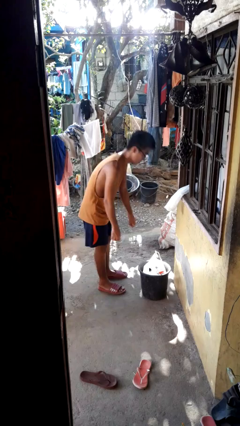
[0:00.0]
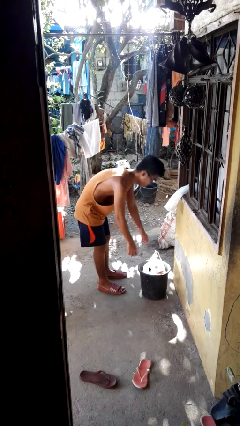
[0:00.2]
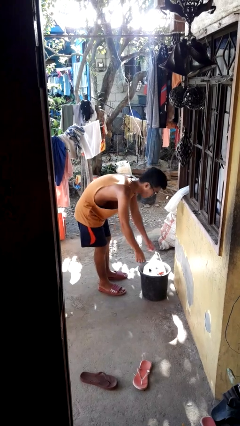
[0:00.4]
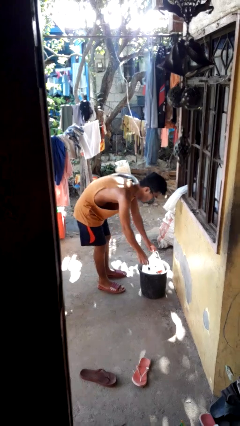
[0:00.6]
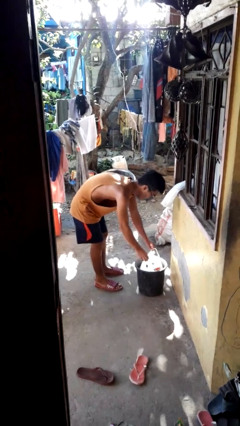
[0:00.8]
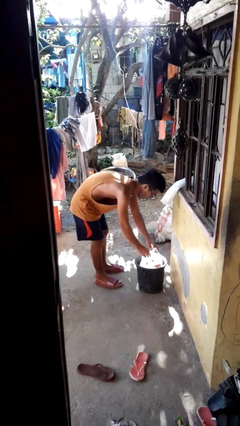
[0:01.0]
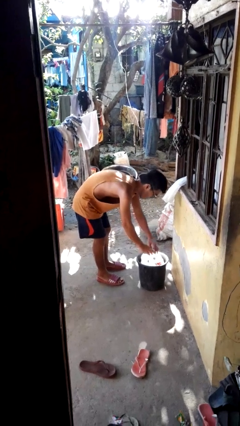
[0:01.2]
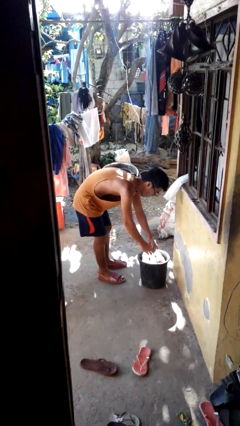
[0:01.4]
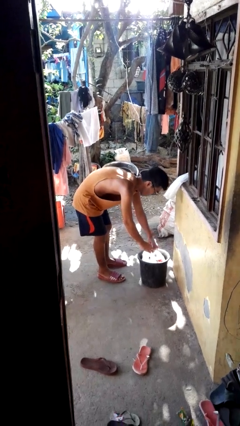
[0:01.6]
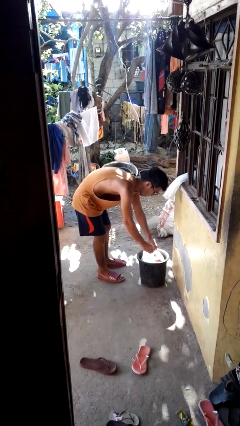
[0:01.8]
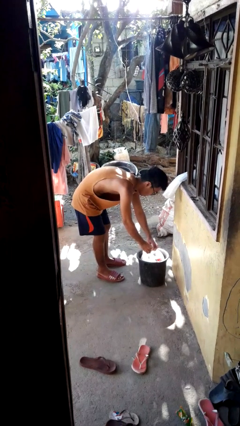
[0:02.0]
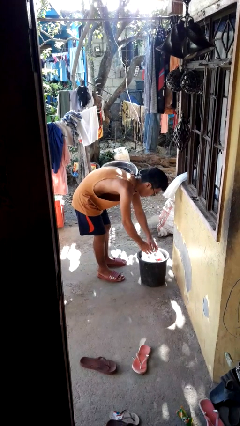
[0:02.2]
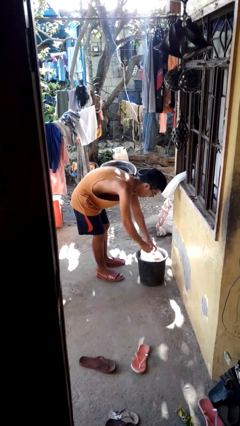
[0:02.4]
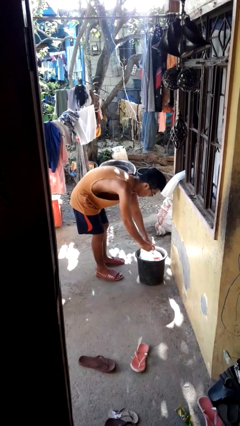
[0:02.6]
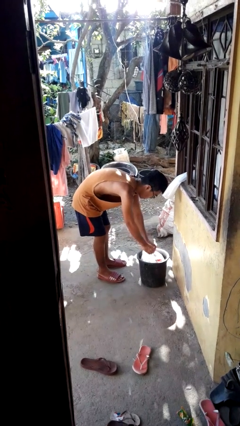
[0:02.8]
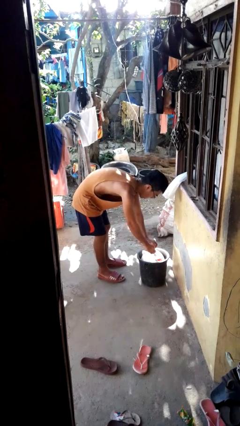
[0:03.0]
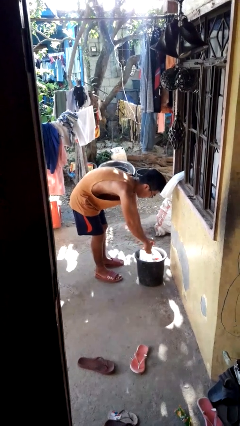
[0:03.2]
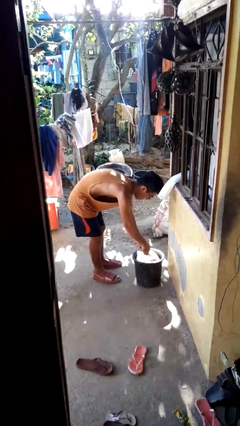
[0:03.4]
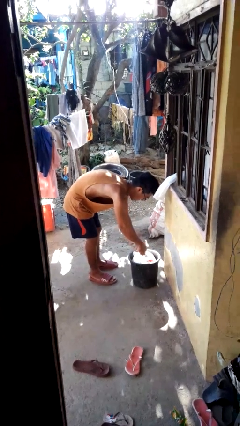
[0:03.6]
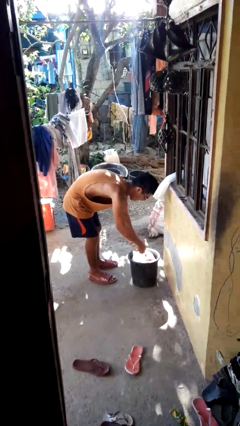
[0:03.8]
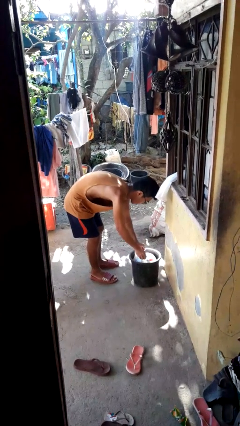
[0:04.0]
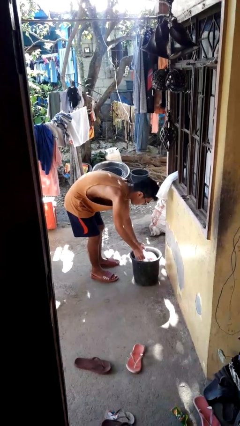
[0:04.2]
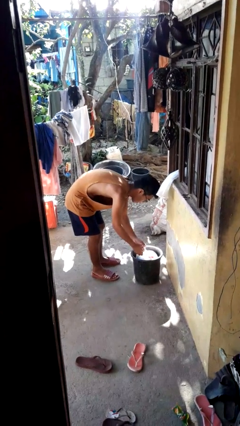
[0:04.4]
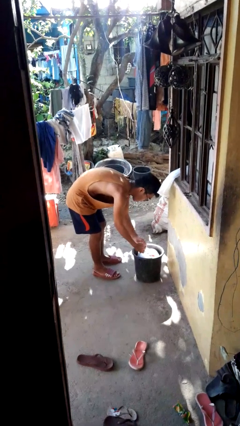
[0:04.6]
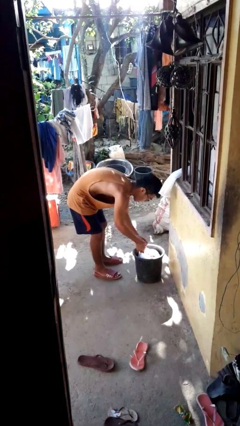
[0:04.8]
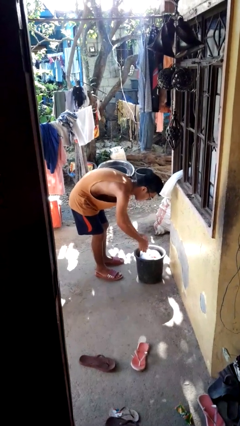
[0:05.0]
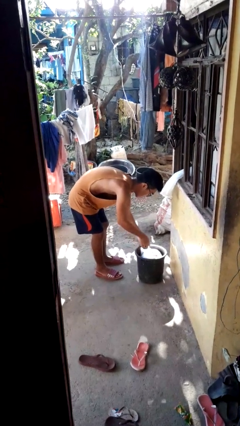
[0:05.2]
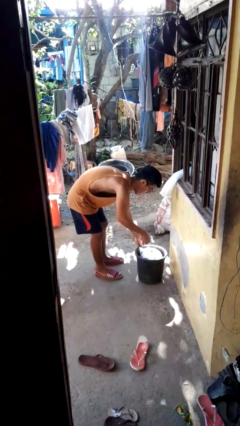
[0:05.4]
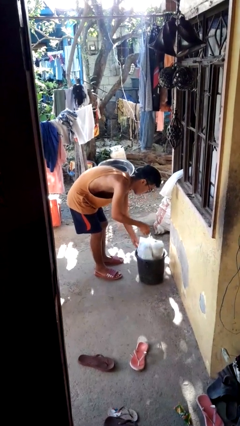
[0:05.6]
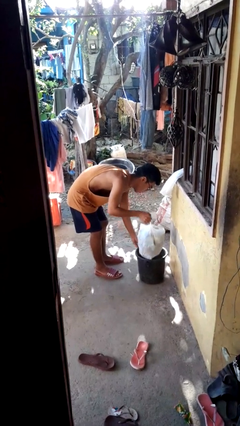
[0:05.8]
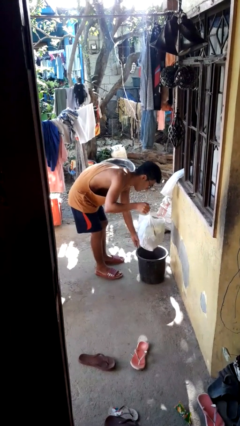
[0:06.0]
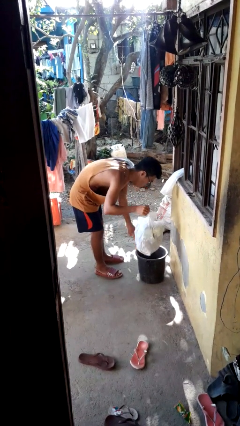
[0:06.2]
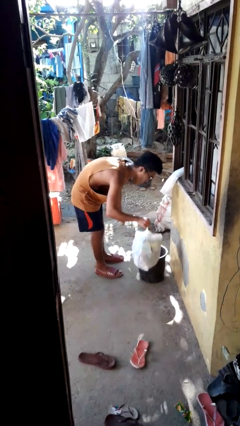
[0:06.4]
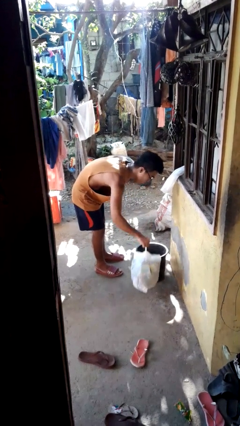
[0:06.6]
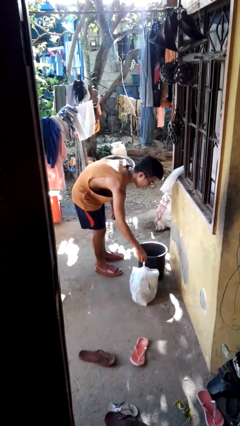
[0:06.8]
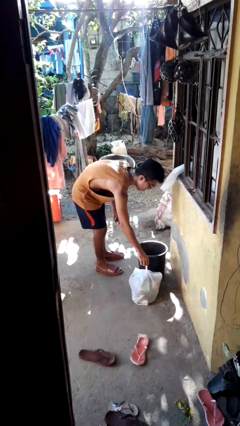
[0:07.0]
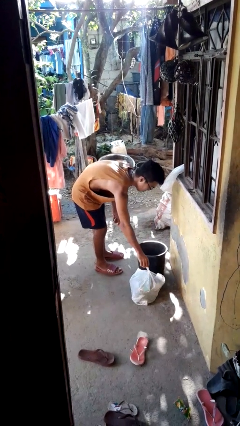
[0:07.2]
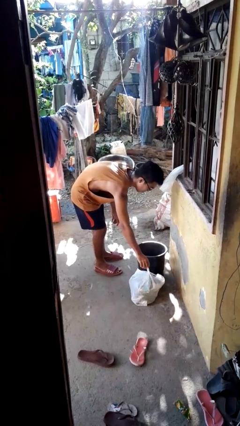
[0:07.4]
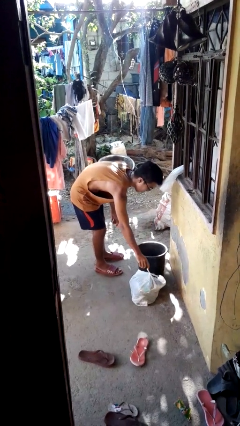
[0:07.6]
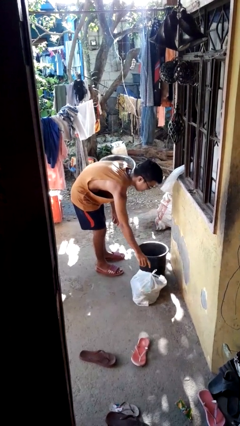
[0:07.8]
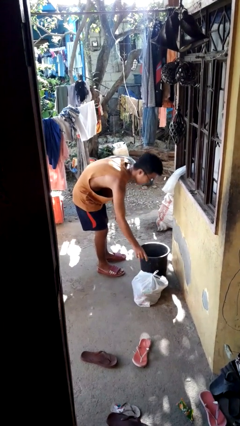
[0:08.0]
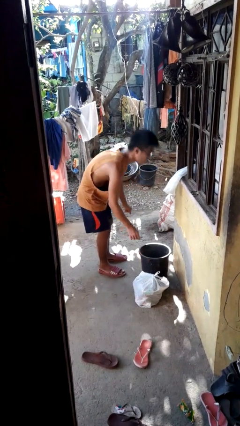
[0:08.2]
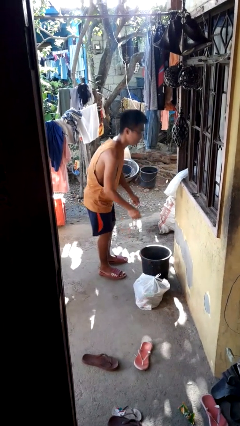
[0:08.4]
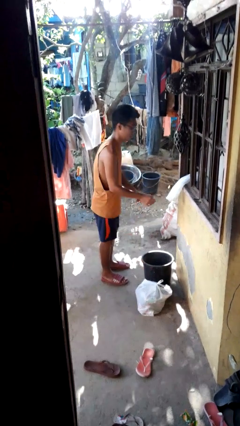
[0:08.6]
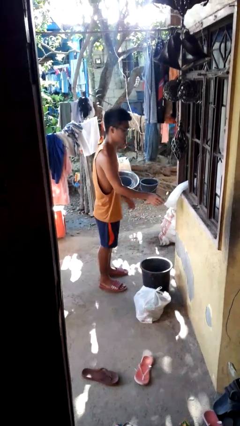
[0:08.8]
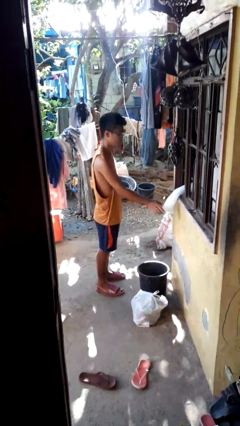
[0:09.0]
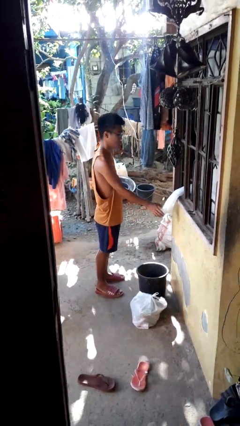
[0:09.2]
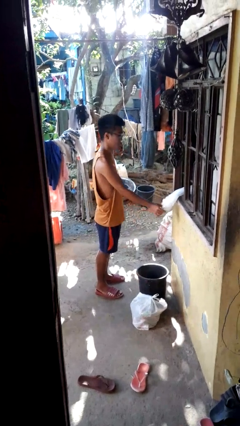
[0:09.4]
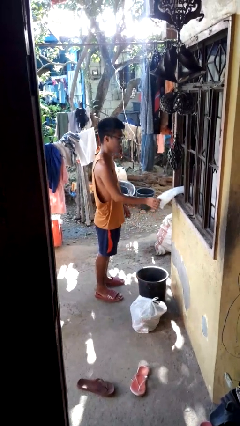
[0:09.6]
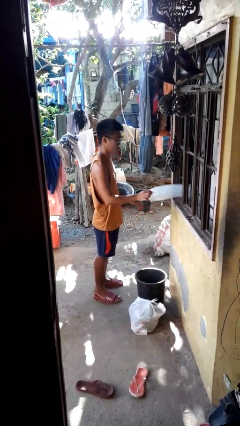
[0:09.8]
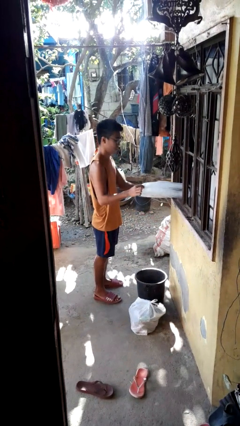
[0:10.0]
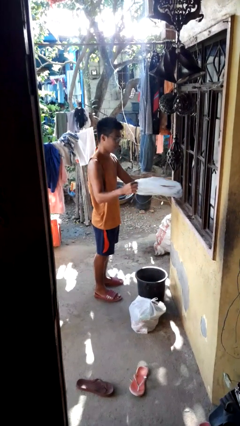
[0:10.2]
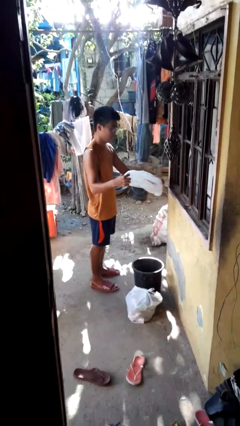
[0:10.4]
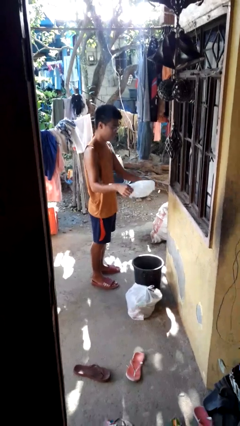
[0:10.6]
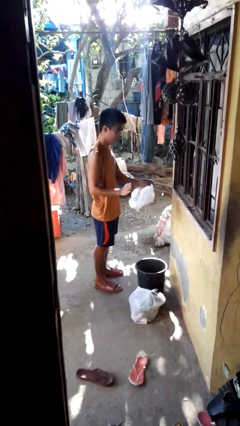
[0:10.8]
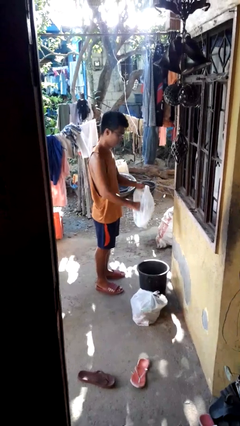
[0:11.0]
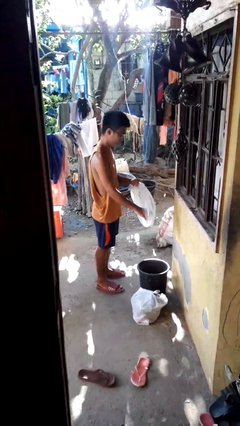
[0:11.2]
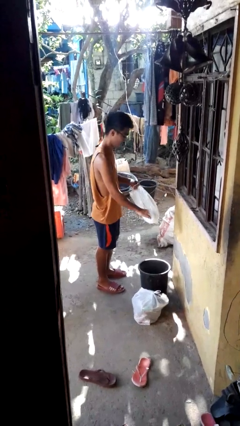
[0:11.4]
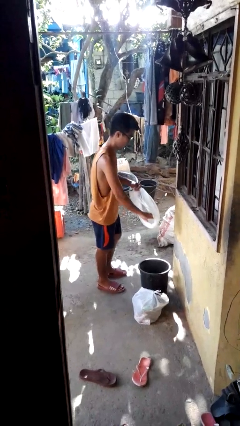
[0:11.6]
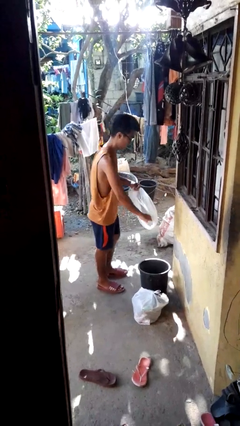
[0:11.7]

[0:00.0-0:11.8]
person removes trashbag from trashcan

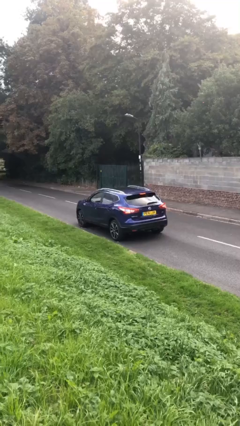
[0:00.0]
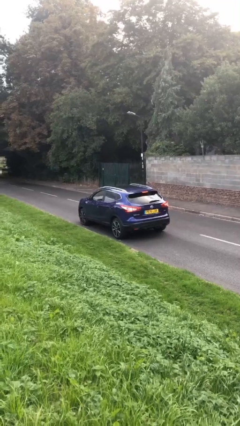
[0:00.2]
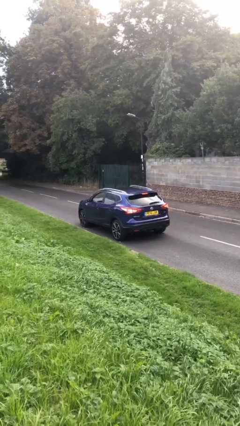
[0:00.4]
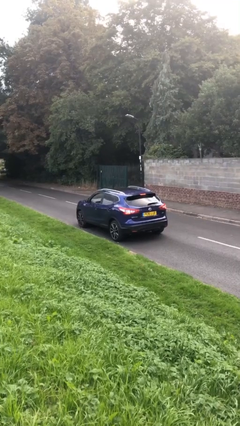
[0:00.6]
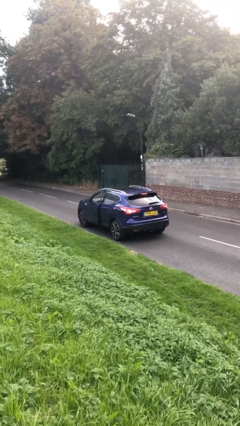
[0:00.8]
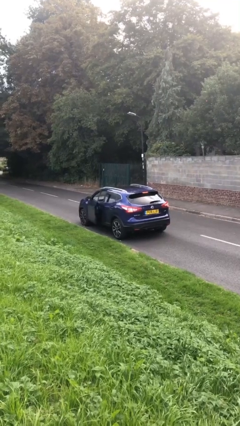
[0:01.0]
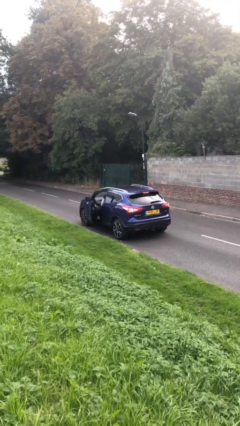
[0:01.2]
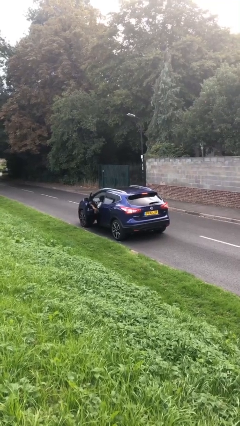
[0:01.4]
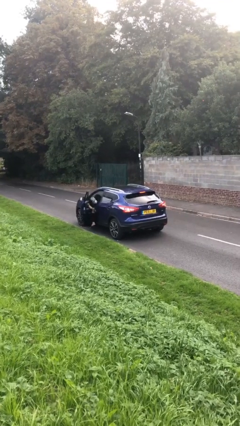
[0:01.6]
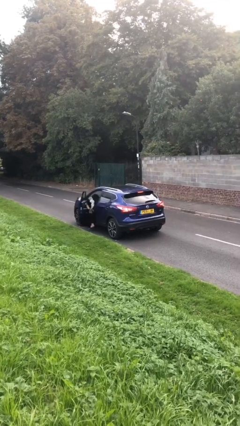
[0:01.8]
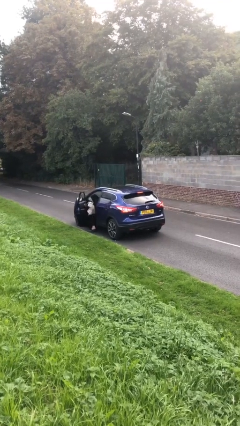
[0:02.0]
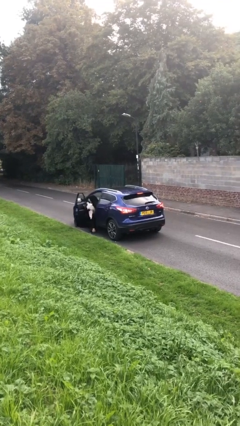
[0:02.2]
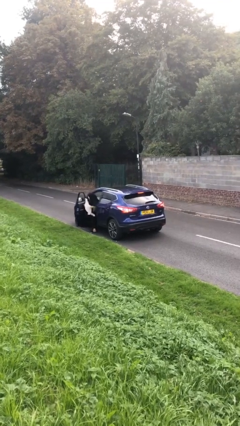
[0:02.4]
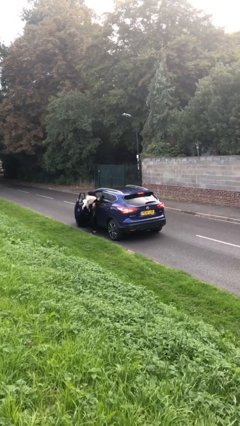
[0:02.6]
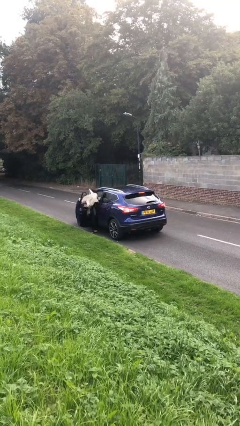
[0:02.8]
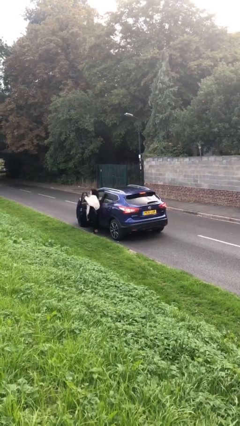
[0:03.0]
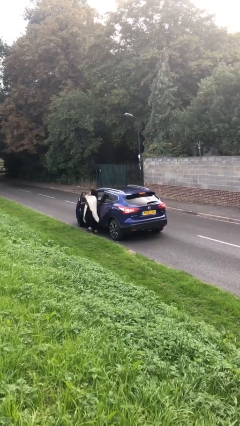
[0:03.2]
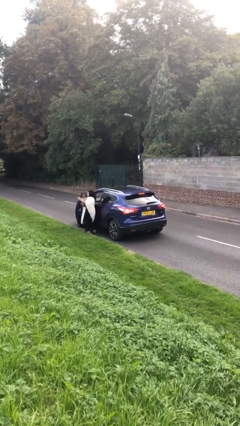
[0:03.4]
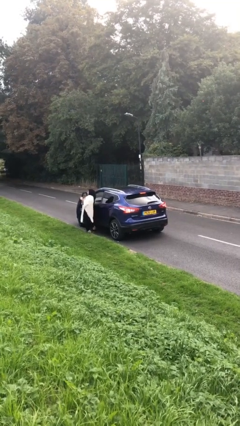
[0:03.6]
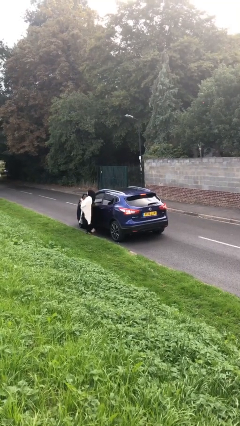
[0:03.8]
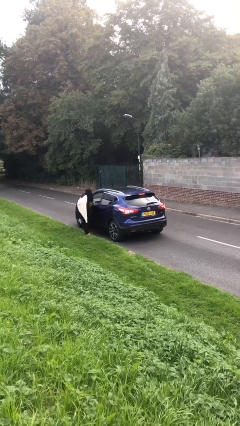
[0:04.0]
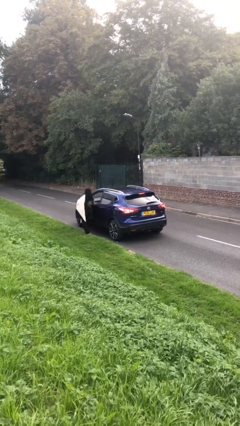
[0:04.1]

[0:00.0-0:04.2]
car drops off person

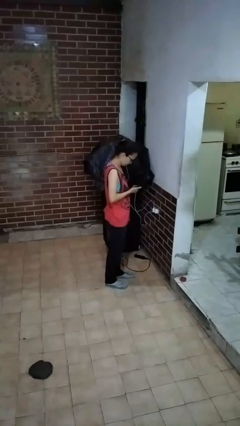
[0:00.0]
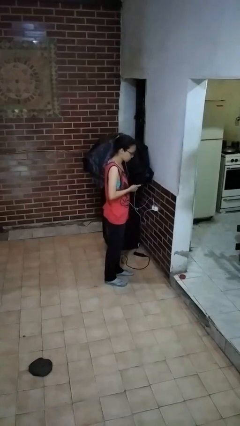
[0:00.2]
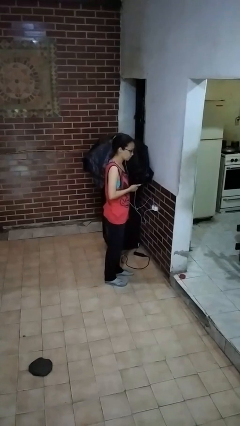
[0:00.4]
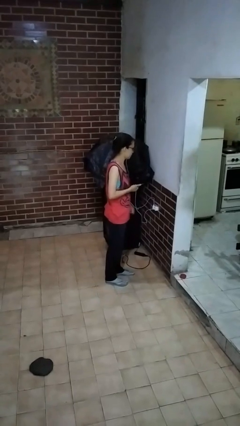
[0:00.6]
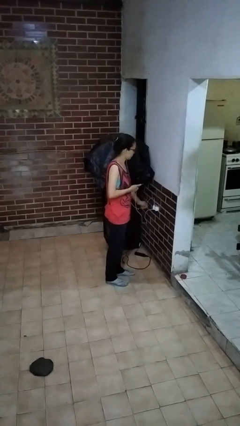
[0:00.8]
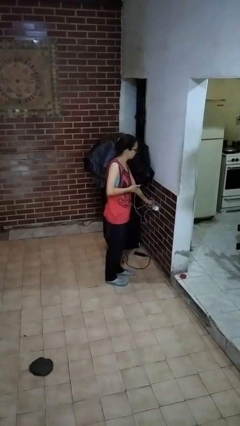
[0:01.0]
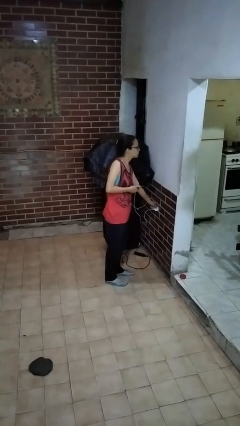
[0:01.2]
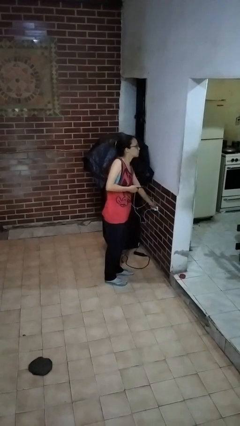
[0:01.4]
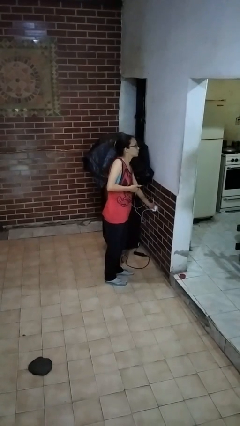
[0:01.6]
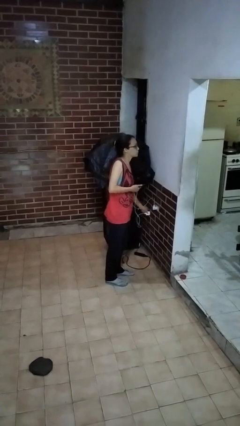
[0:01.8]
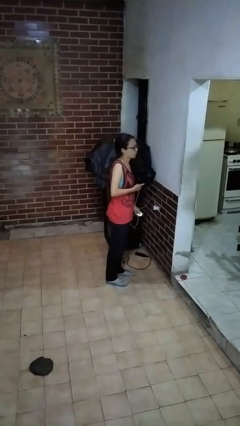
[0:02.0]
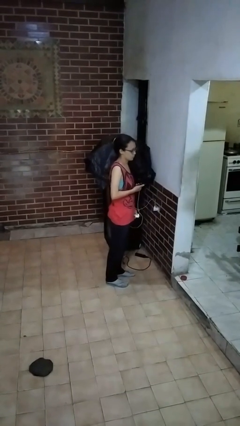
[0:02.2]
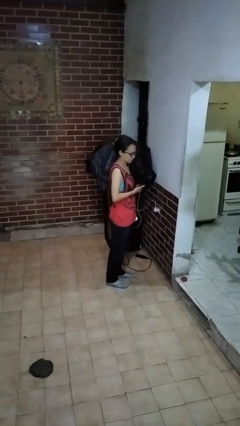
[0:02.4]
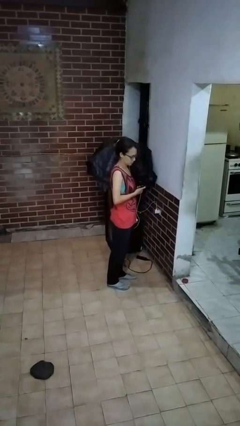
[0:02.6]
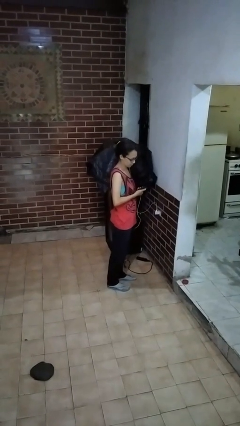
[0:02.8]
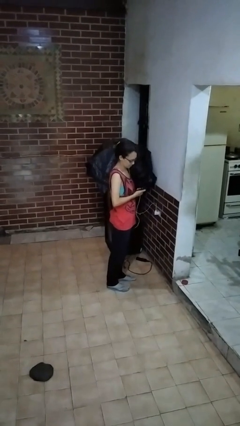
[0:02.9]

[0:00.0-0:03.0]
person unplugs from electrical socket
